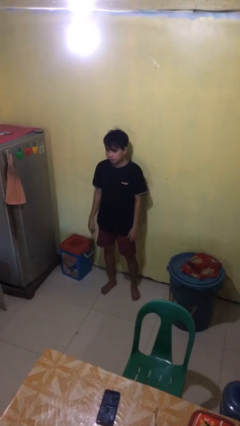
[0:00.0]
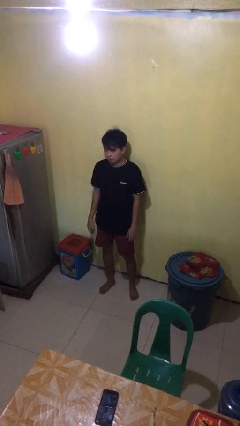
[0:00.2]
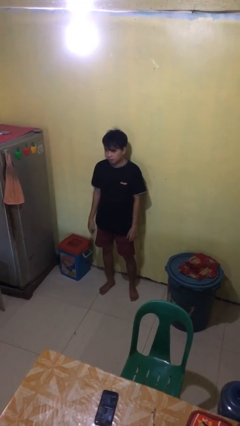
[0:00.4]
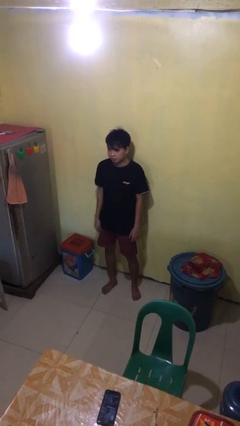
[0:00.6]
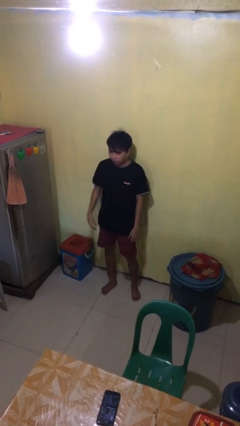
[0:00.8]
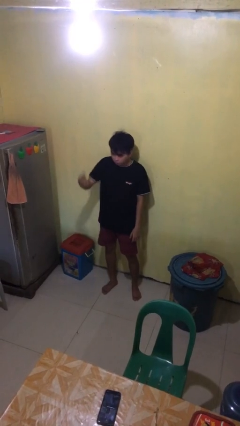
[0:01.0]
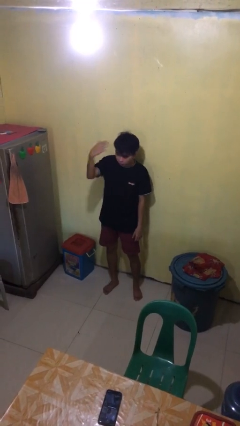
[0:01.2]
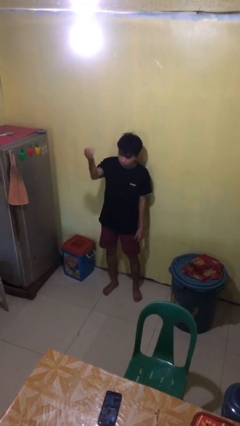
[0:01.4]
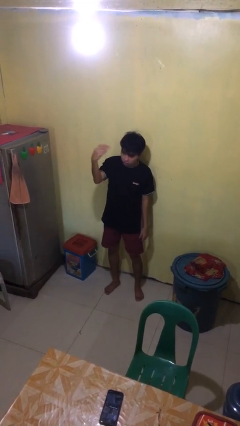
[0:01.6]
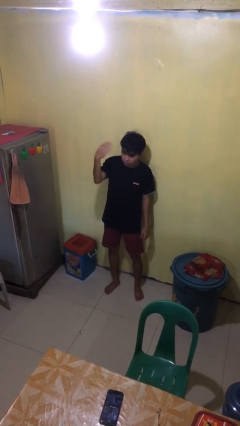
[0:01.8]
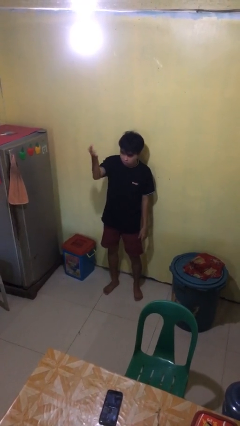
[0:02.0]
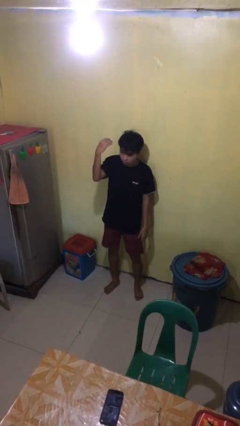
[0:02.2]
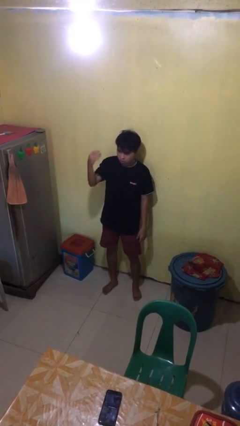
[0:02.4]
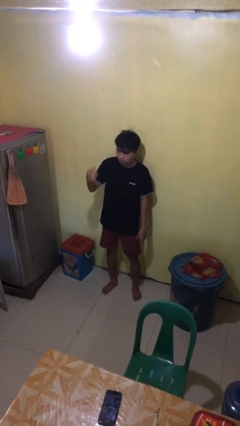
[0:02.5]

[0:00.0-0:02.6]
person gestures come here

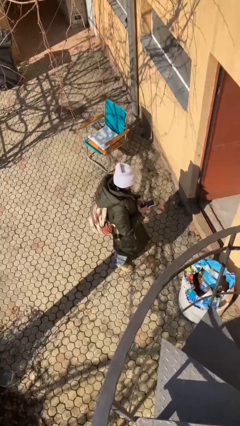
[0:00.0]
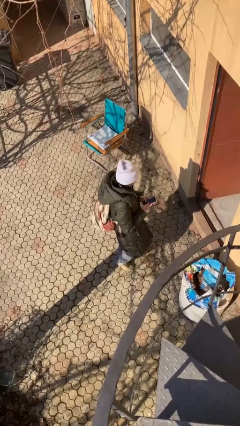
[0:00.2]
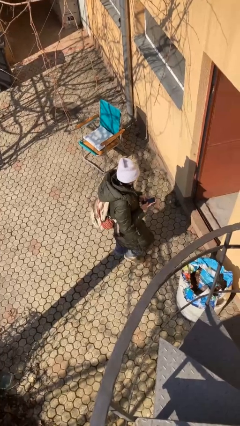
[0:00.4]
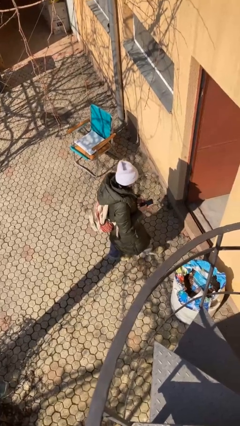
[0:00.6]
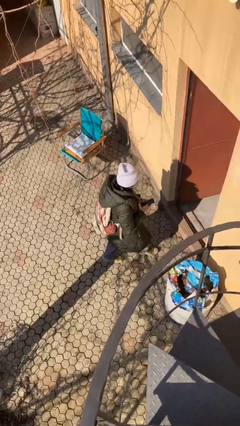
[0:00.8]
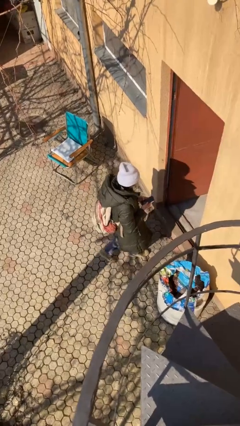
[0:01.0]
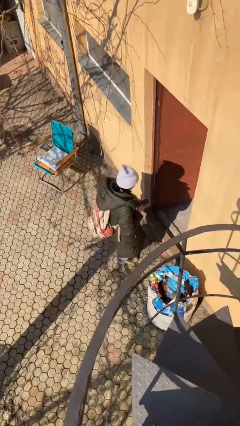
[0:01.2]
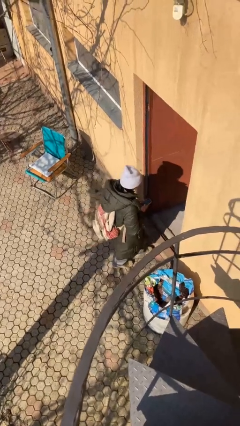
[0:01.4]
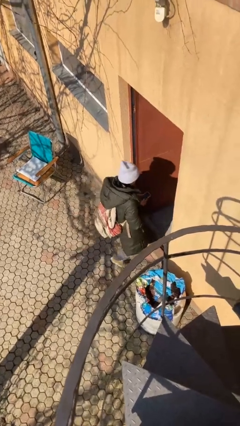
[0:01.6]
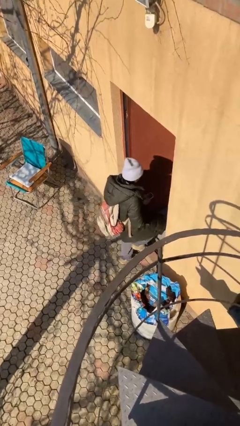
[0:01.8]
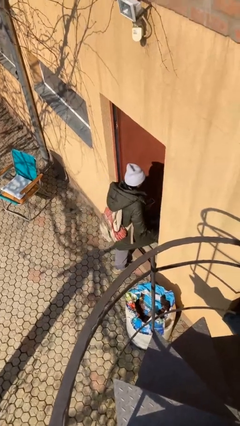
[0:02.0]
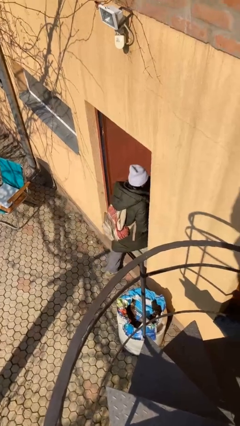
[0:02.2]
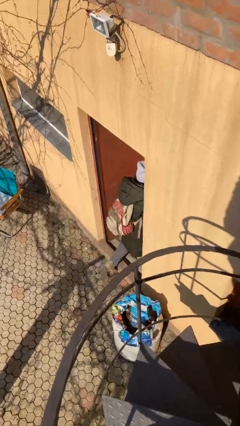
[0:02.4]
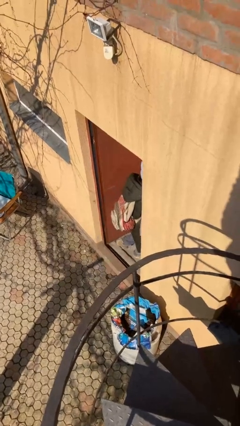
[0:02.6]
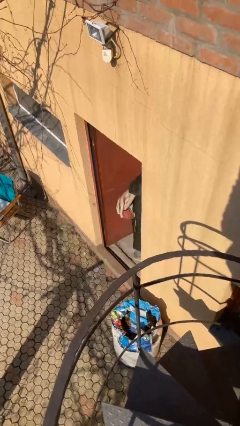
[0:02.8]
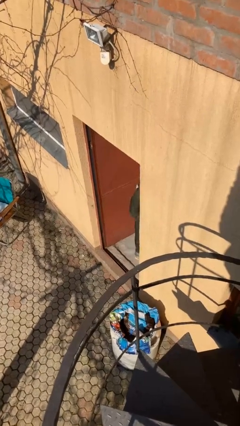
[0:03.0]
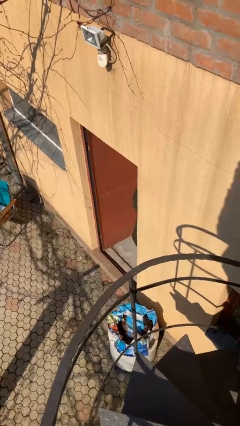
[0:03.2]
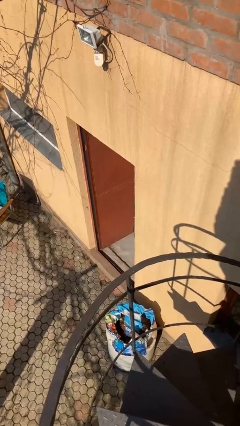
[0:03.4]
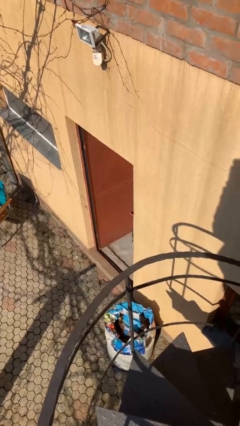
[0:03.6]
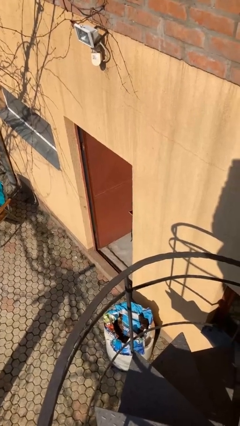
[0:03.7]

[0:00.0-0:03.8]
person exits scene through structure

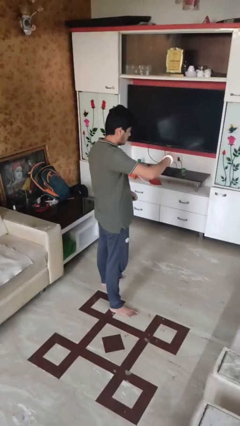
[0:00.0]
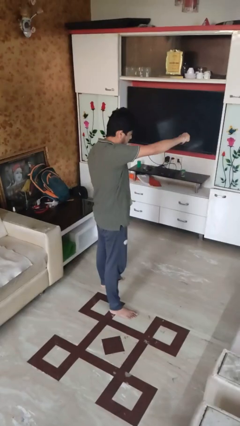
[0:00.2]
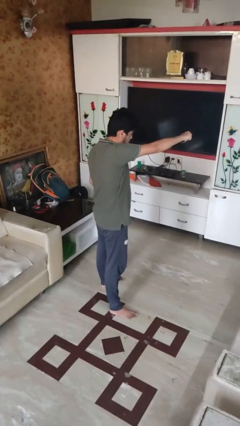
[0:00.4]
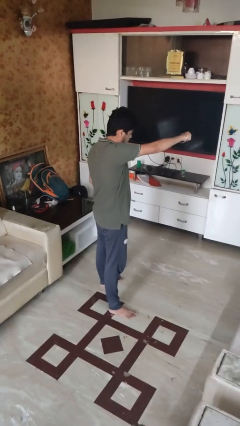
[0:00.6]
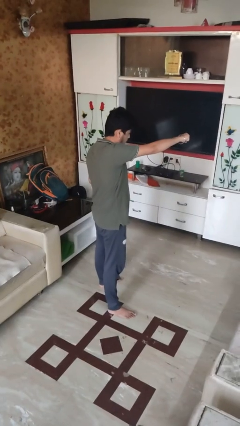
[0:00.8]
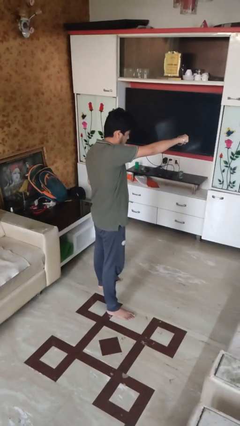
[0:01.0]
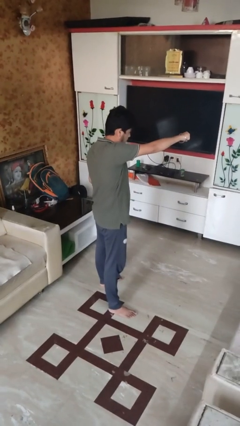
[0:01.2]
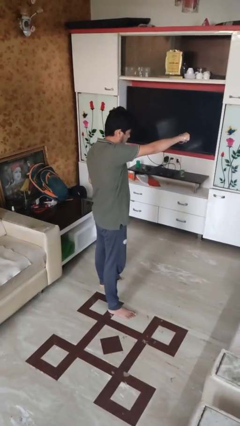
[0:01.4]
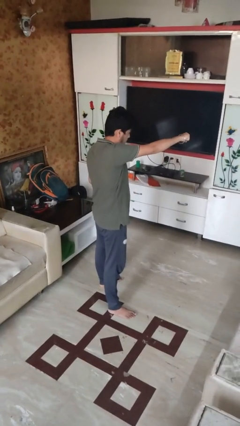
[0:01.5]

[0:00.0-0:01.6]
person punches

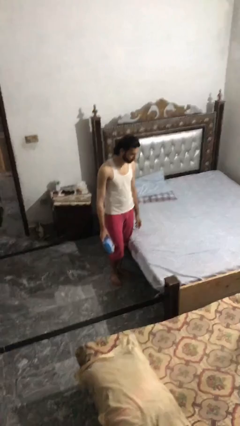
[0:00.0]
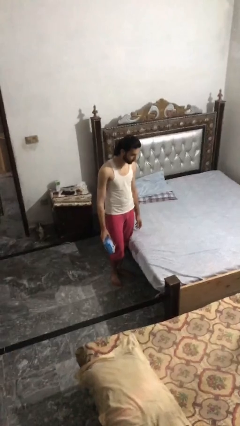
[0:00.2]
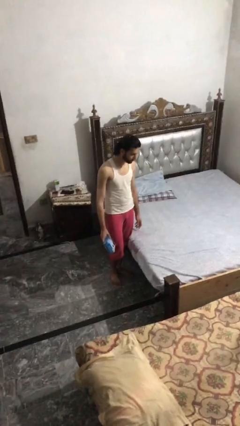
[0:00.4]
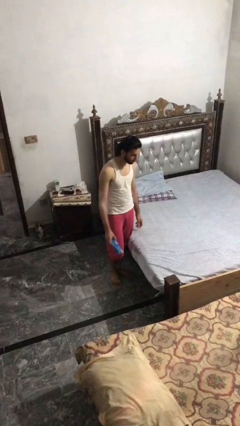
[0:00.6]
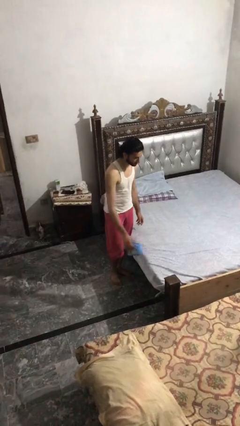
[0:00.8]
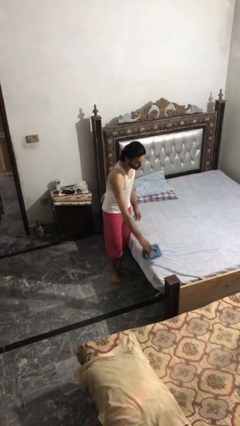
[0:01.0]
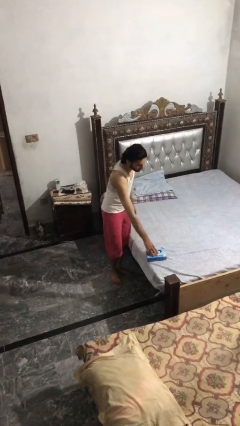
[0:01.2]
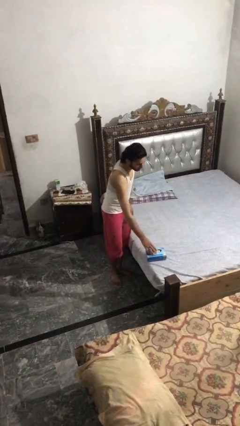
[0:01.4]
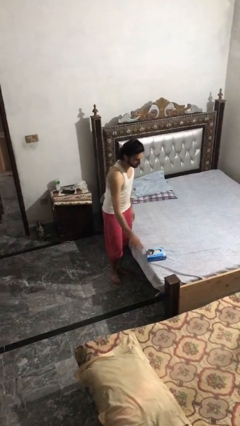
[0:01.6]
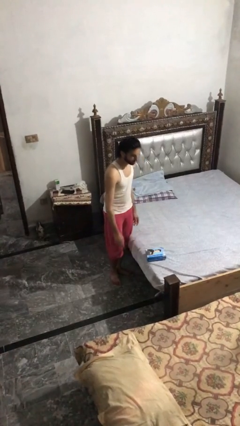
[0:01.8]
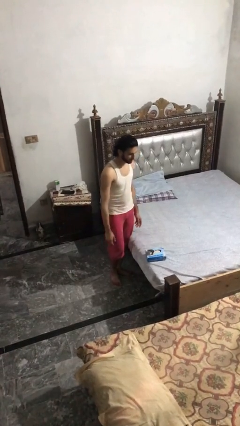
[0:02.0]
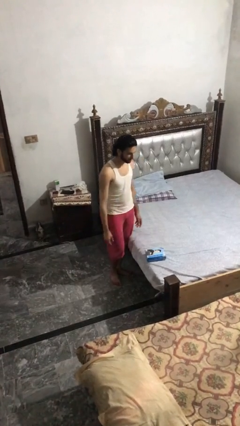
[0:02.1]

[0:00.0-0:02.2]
person puts down object on bed

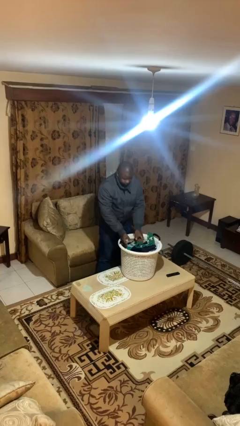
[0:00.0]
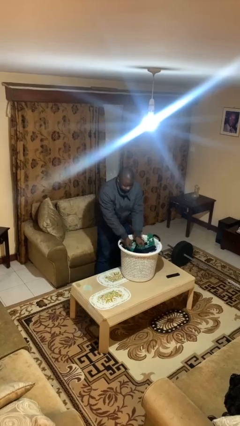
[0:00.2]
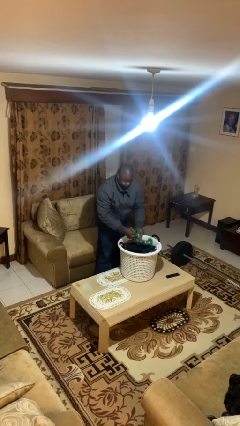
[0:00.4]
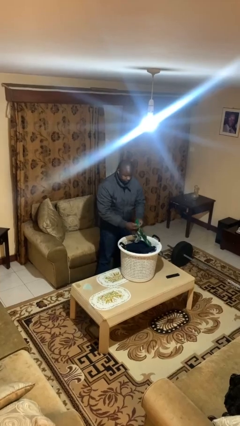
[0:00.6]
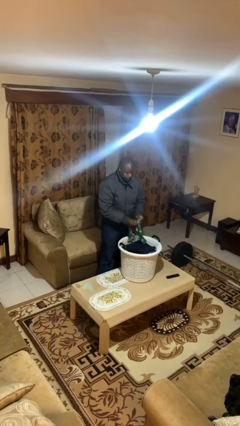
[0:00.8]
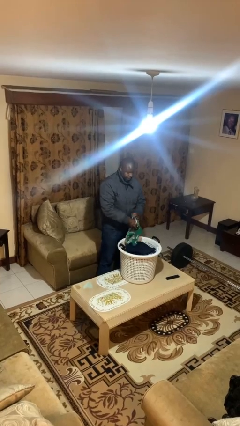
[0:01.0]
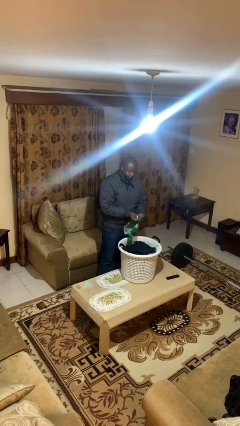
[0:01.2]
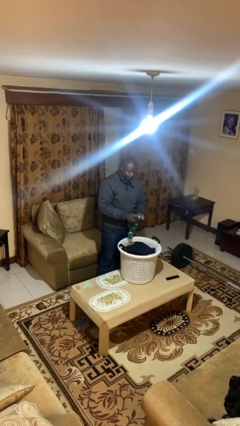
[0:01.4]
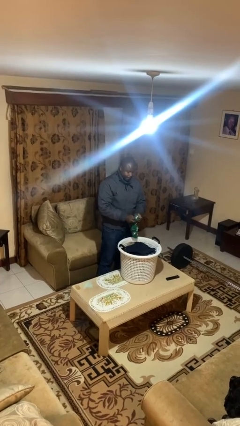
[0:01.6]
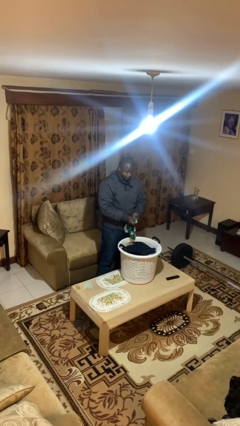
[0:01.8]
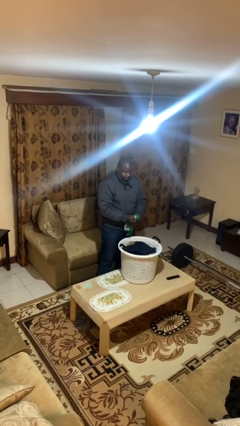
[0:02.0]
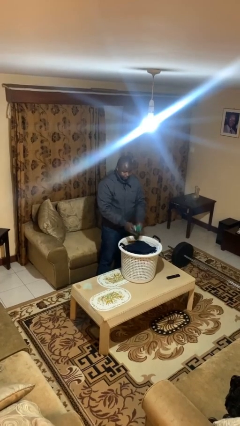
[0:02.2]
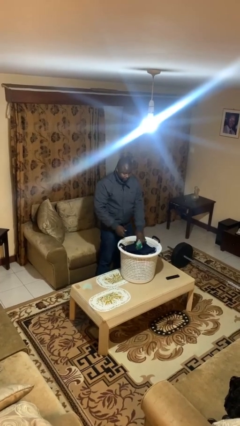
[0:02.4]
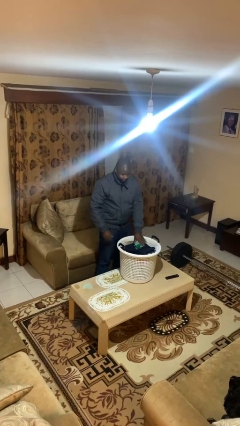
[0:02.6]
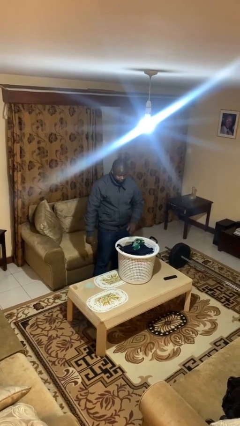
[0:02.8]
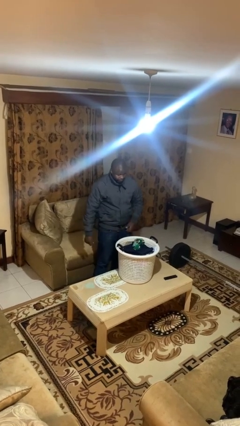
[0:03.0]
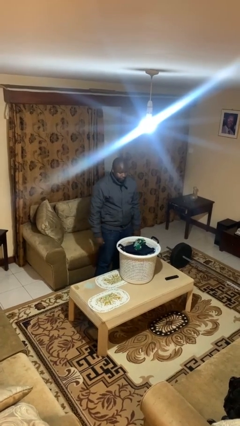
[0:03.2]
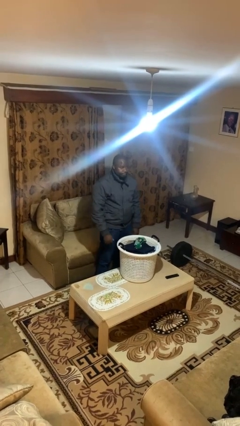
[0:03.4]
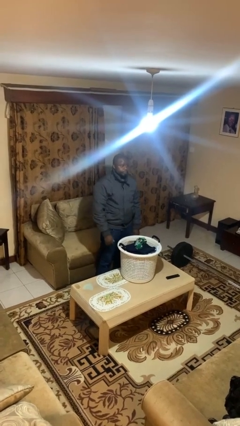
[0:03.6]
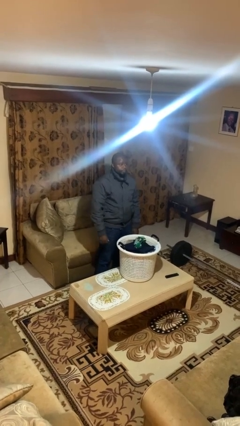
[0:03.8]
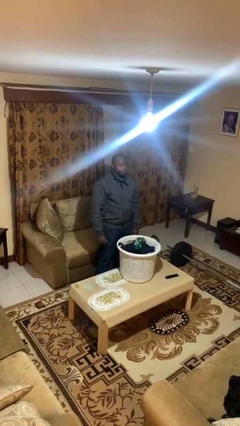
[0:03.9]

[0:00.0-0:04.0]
person folds socks

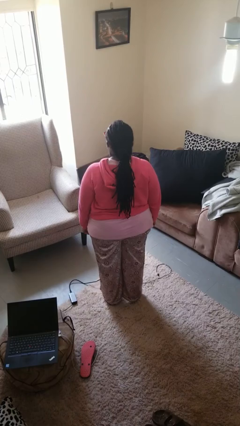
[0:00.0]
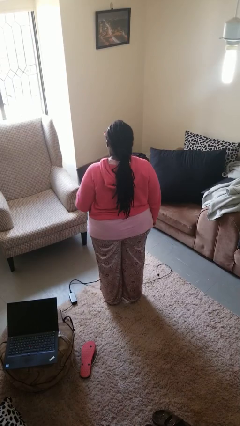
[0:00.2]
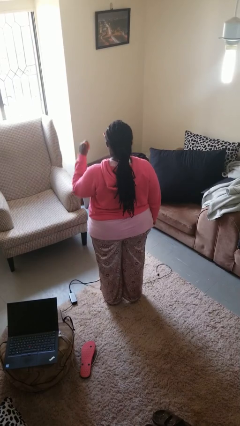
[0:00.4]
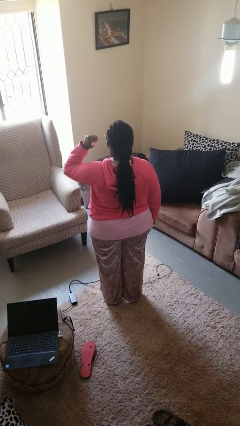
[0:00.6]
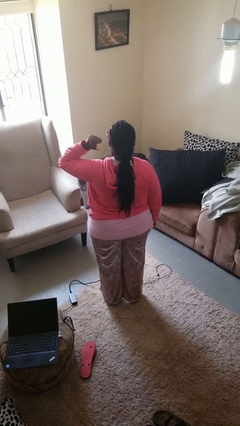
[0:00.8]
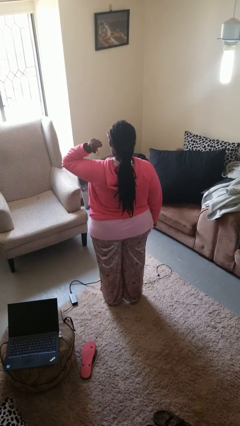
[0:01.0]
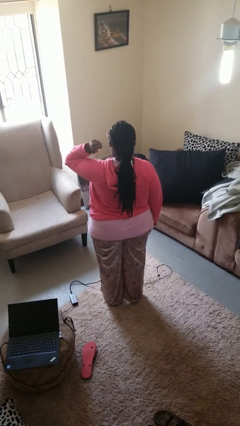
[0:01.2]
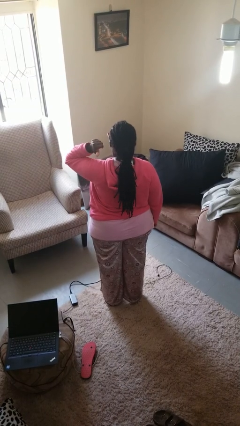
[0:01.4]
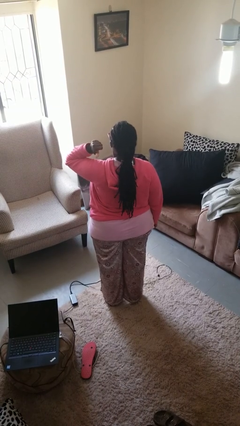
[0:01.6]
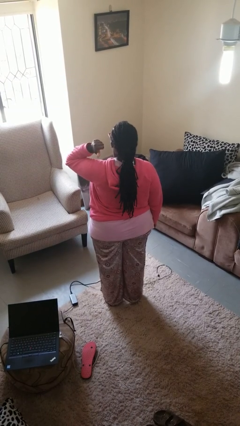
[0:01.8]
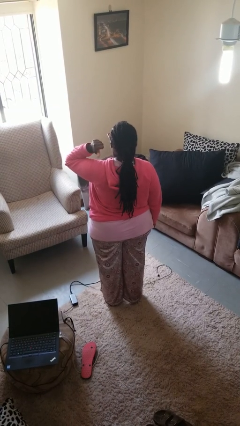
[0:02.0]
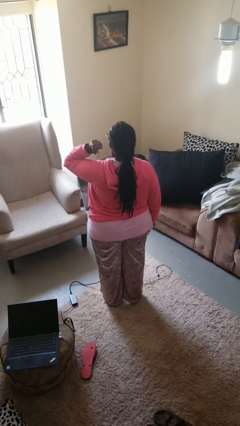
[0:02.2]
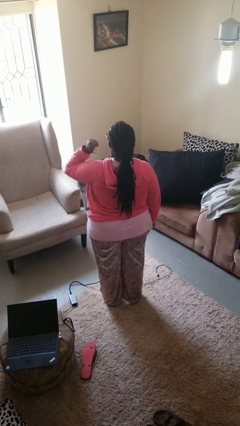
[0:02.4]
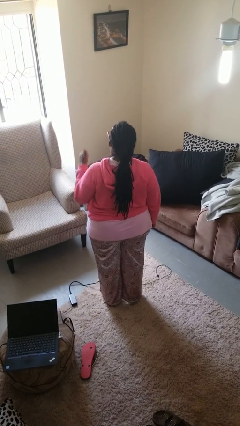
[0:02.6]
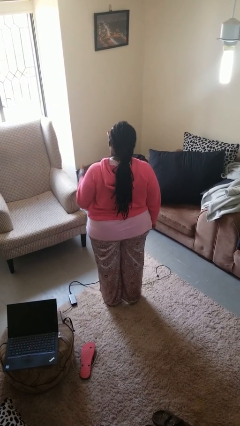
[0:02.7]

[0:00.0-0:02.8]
person gestures behind me
